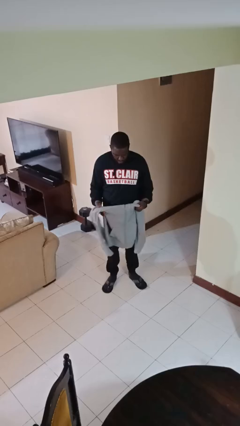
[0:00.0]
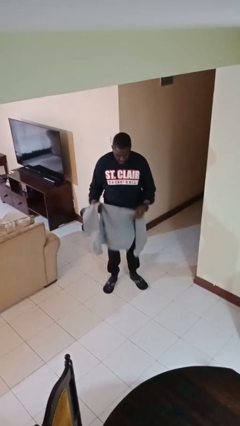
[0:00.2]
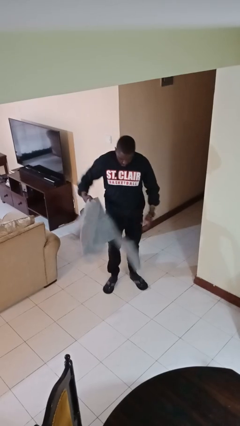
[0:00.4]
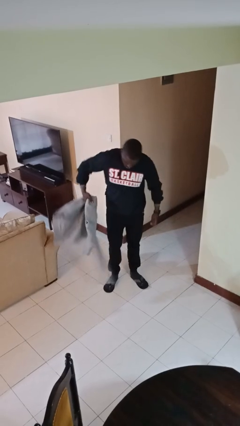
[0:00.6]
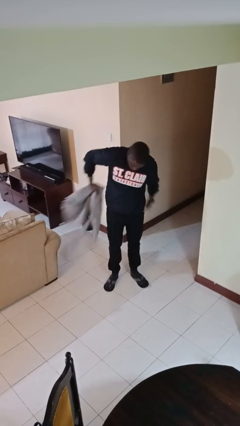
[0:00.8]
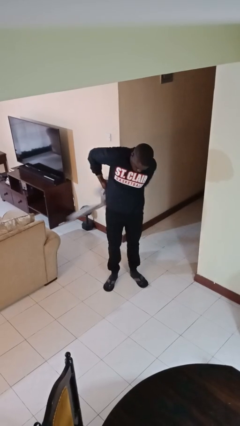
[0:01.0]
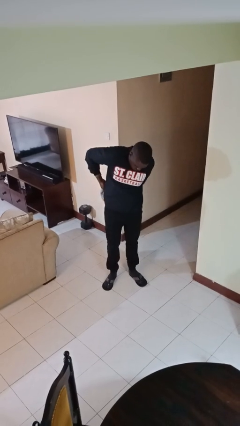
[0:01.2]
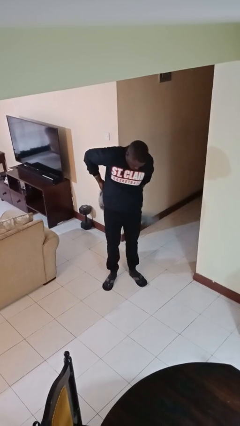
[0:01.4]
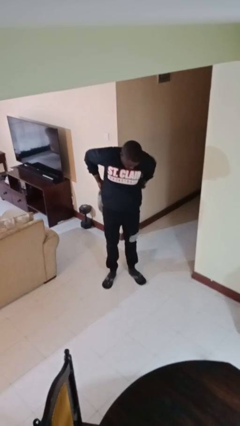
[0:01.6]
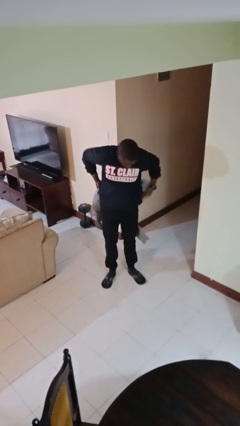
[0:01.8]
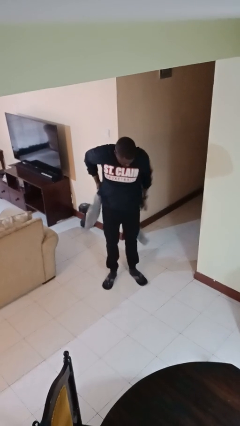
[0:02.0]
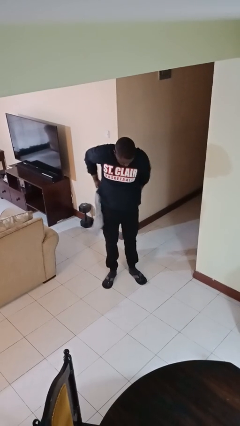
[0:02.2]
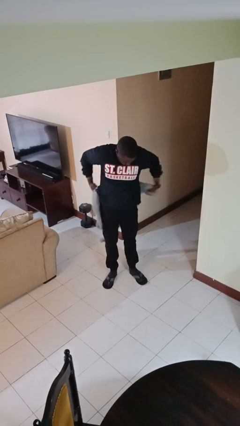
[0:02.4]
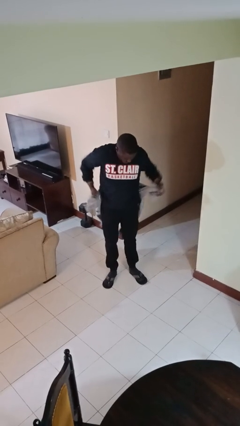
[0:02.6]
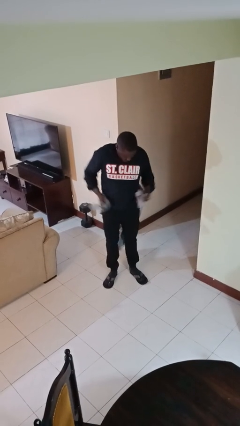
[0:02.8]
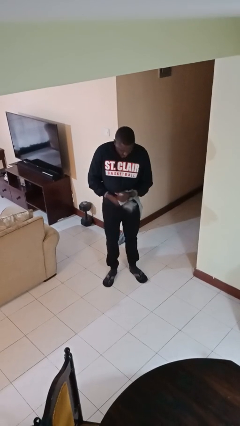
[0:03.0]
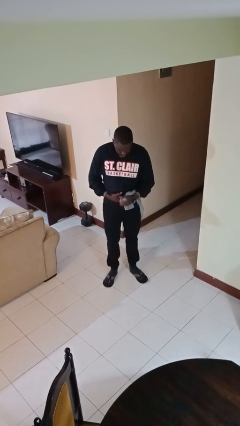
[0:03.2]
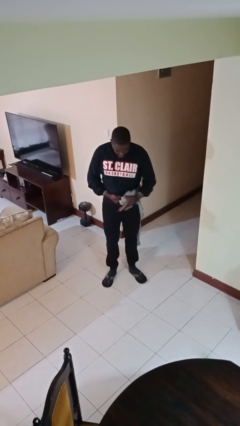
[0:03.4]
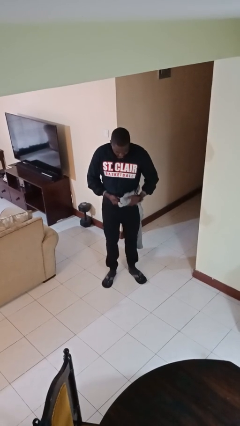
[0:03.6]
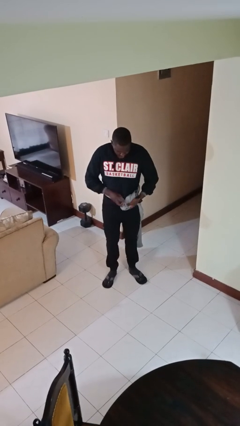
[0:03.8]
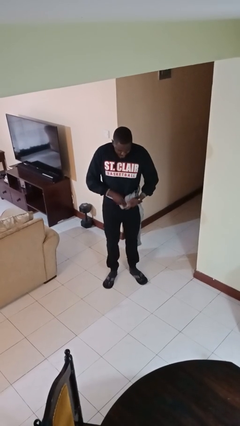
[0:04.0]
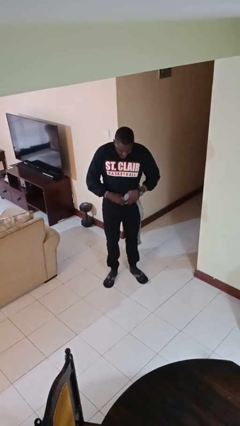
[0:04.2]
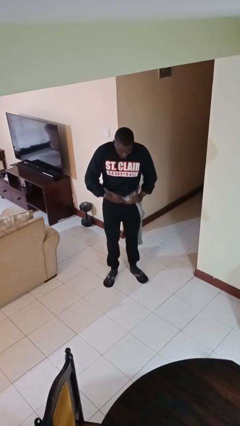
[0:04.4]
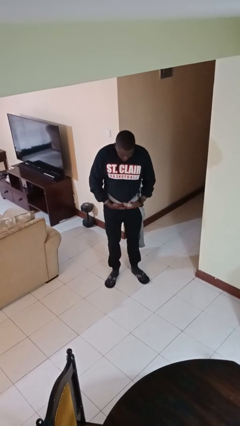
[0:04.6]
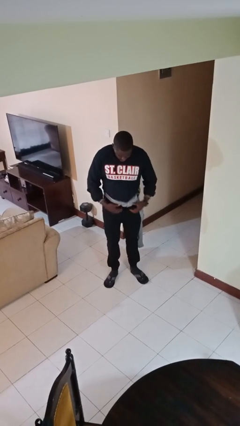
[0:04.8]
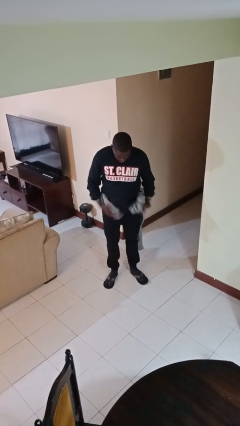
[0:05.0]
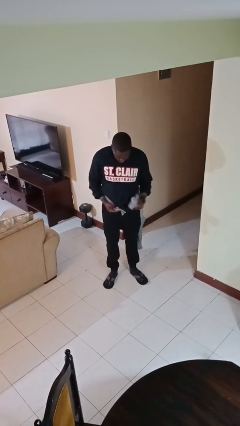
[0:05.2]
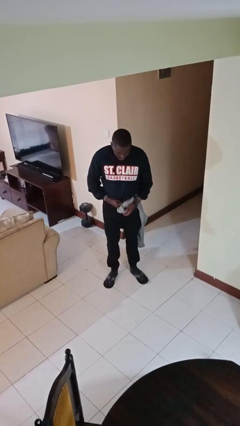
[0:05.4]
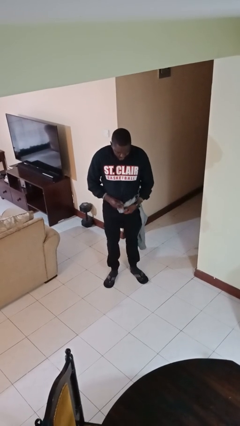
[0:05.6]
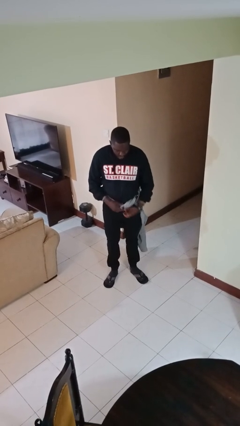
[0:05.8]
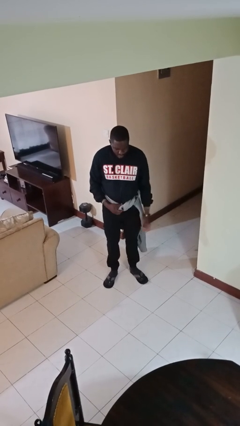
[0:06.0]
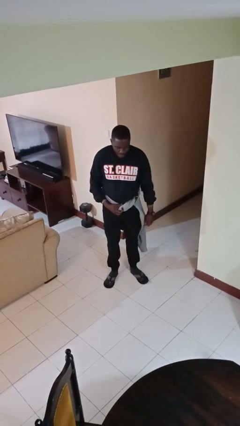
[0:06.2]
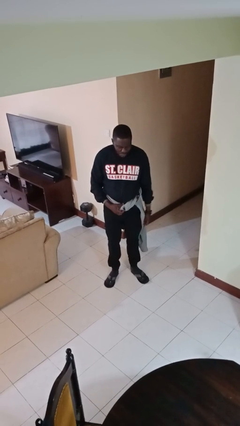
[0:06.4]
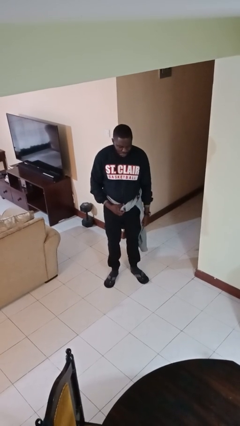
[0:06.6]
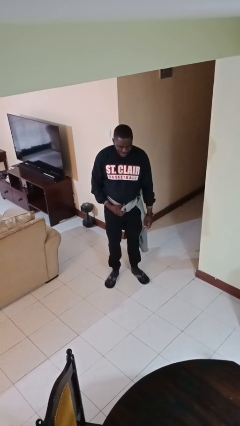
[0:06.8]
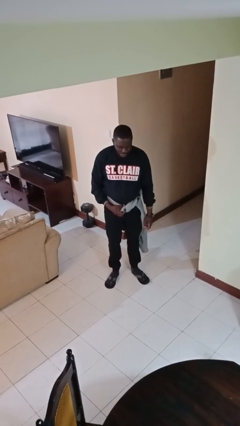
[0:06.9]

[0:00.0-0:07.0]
person ties jacket around waist

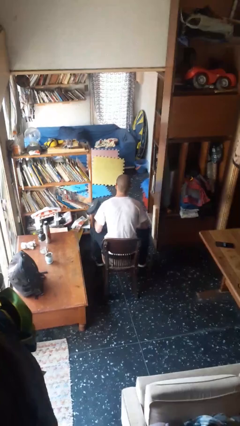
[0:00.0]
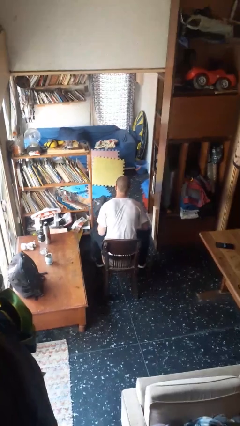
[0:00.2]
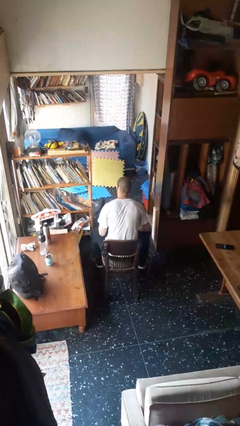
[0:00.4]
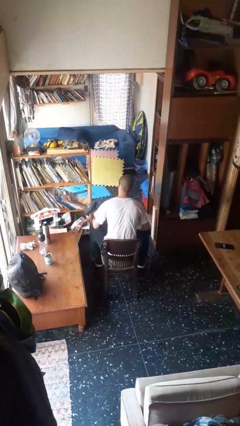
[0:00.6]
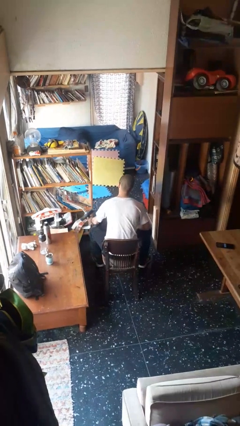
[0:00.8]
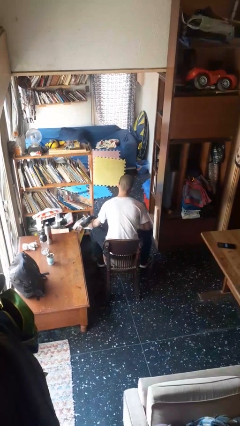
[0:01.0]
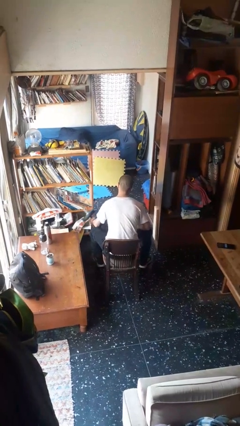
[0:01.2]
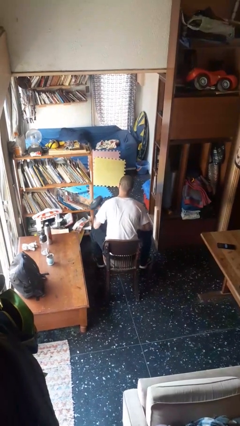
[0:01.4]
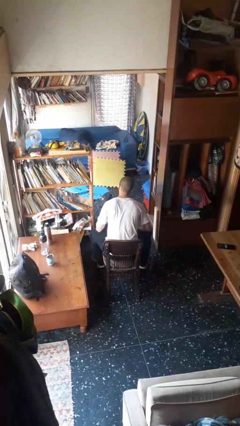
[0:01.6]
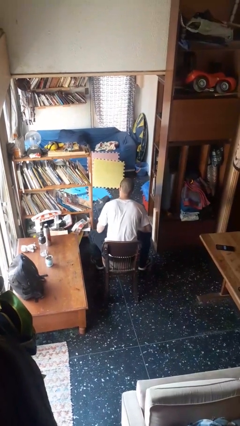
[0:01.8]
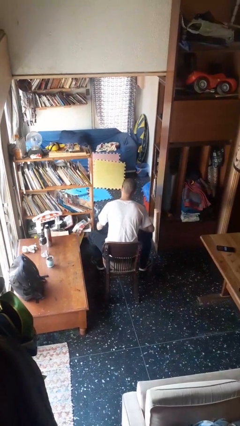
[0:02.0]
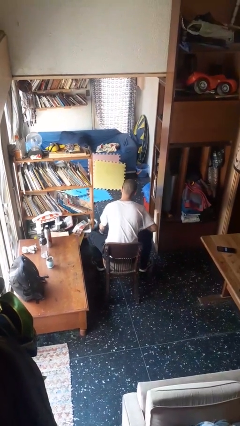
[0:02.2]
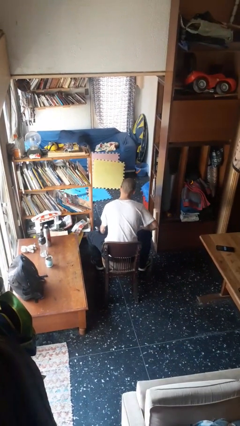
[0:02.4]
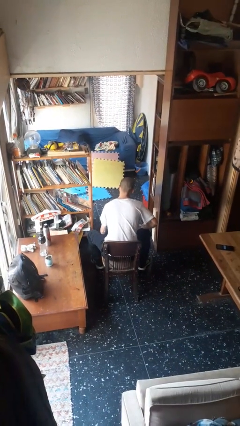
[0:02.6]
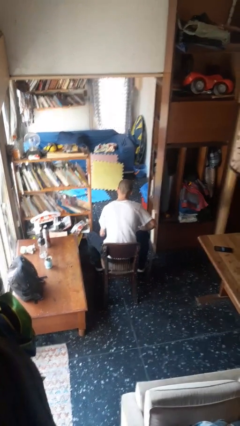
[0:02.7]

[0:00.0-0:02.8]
person lifts dumbbells

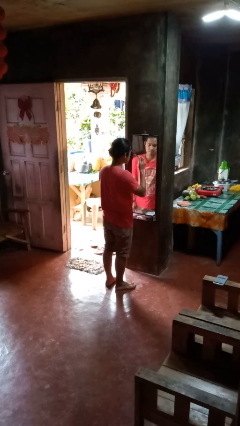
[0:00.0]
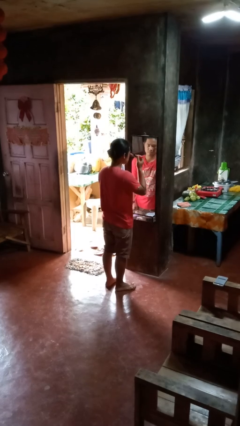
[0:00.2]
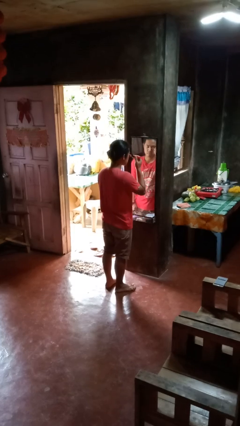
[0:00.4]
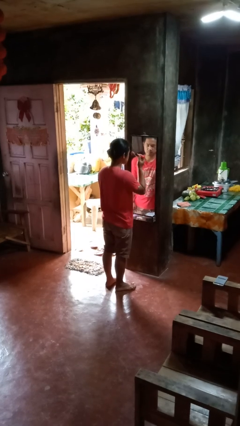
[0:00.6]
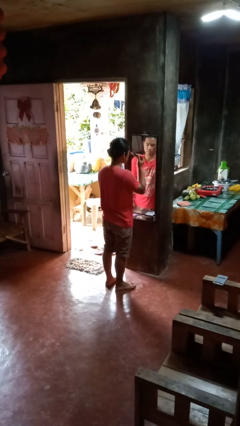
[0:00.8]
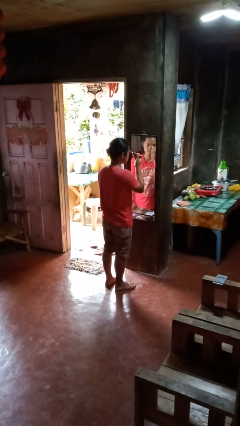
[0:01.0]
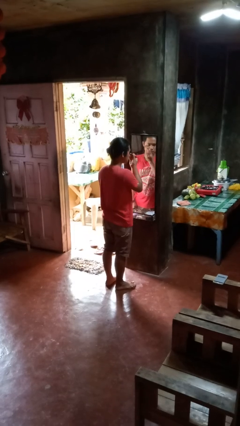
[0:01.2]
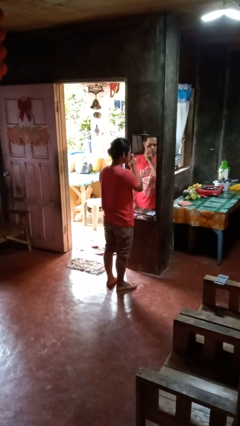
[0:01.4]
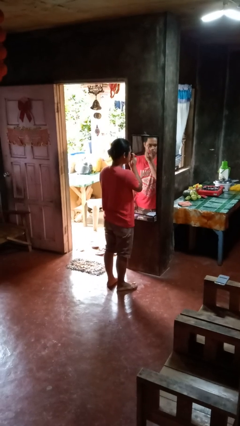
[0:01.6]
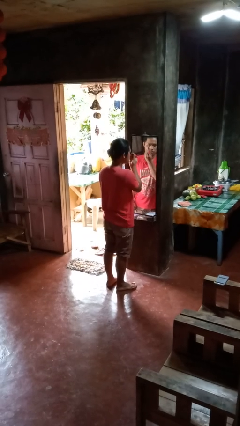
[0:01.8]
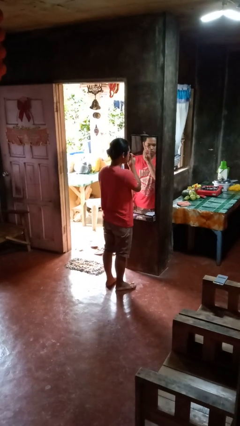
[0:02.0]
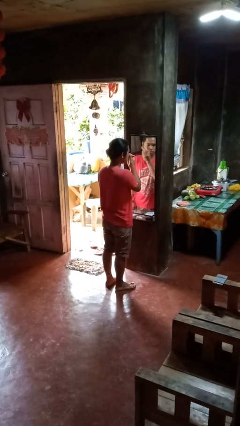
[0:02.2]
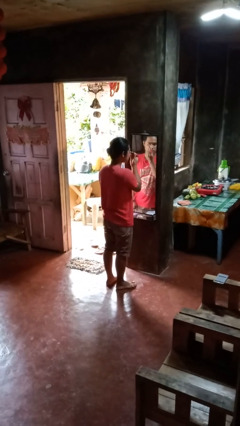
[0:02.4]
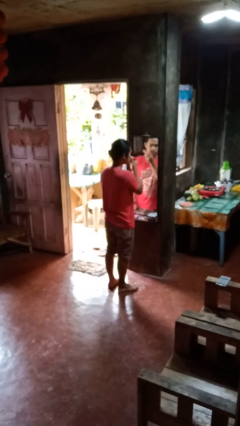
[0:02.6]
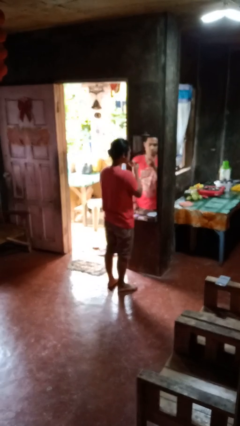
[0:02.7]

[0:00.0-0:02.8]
person applies eye makeup

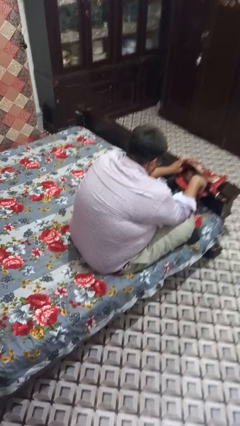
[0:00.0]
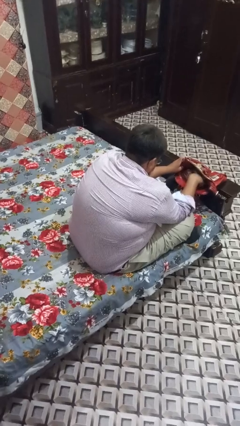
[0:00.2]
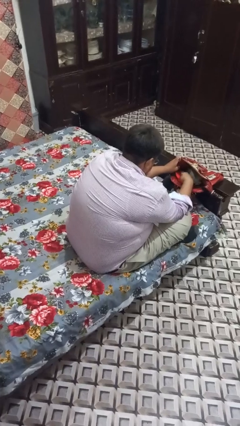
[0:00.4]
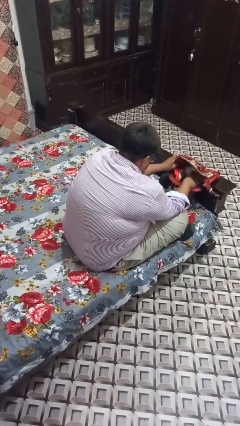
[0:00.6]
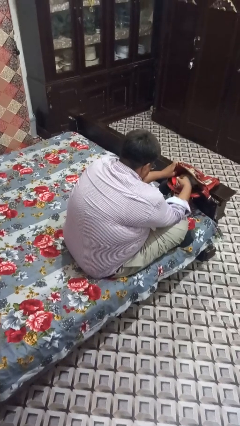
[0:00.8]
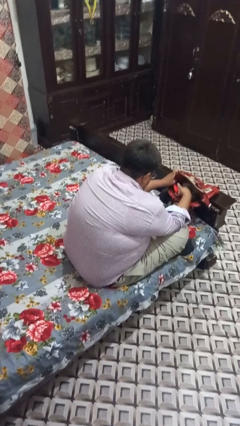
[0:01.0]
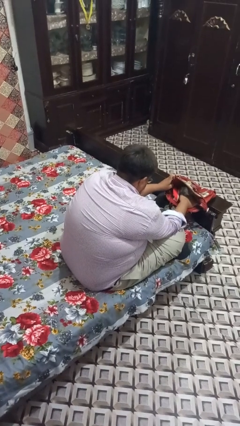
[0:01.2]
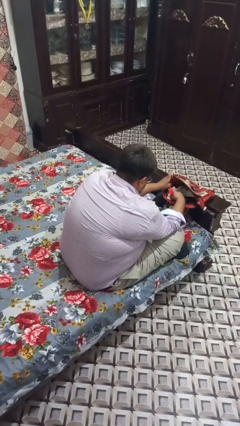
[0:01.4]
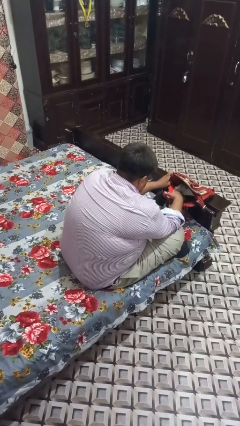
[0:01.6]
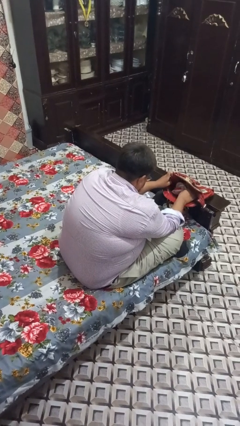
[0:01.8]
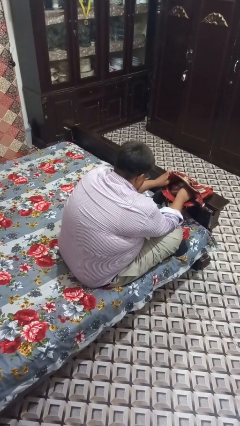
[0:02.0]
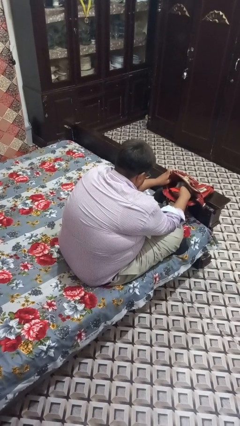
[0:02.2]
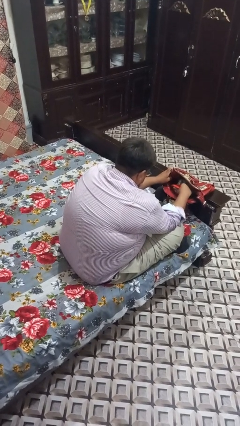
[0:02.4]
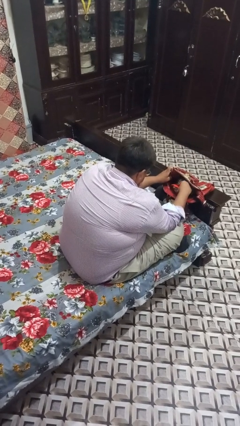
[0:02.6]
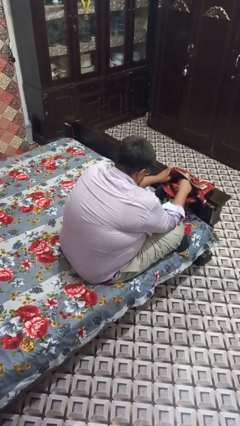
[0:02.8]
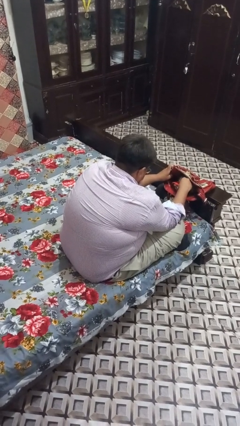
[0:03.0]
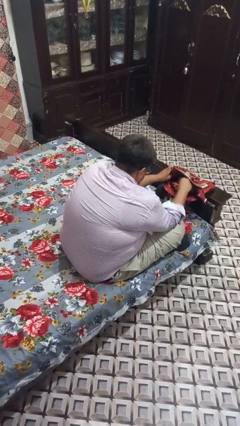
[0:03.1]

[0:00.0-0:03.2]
person searches in purse

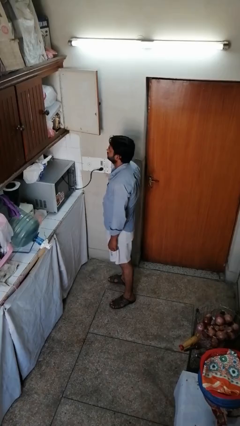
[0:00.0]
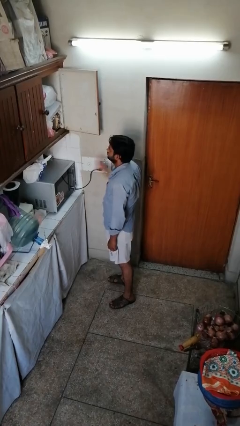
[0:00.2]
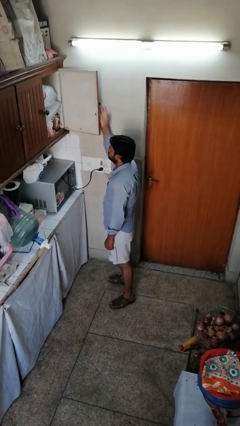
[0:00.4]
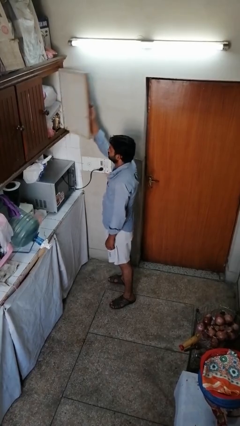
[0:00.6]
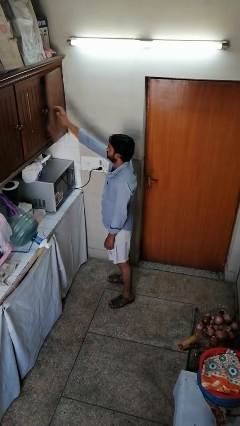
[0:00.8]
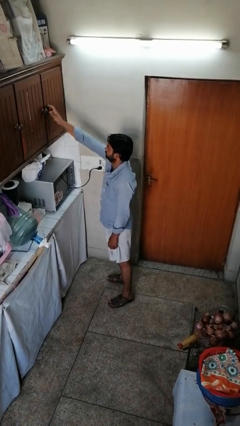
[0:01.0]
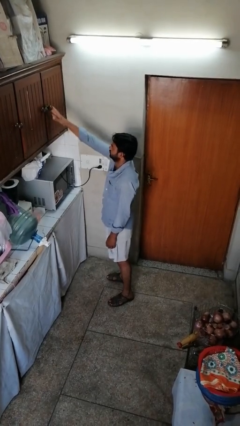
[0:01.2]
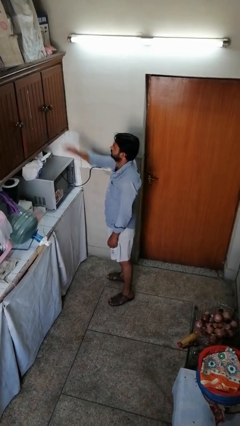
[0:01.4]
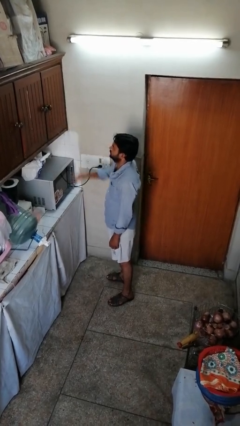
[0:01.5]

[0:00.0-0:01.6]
person closes cabinet

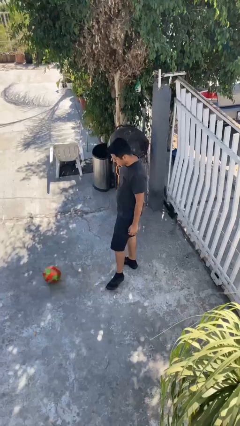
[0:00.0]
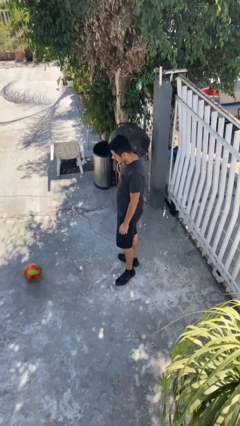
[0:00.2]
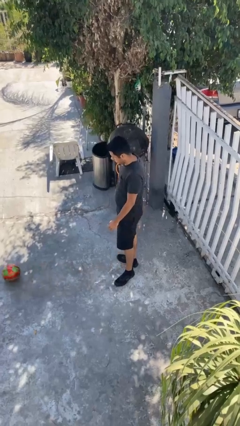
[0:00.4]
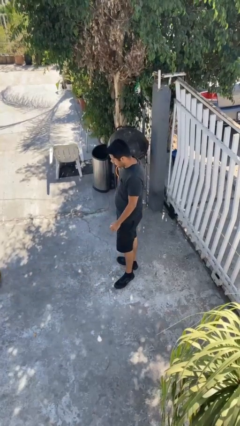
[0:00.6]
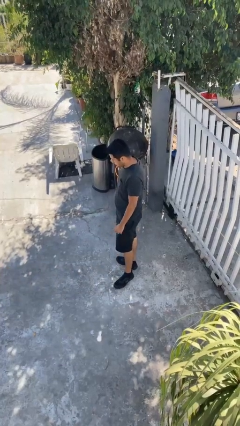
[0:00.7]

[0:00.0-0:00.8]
person kicks object to person
